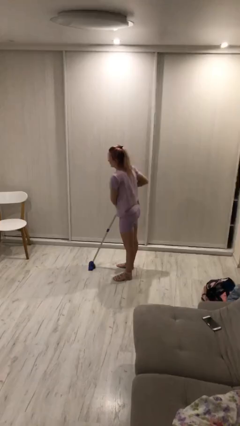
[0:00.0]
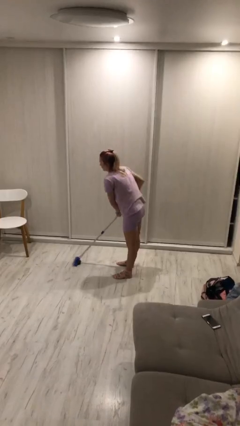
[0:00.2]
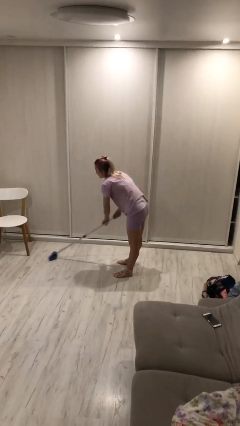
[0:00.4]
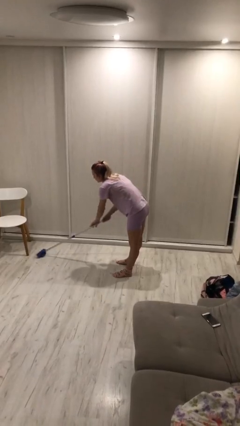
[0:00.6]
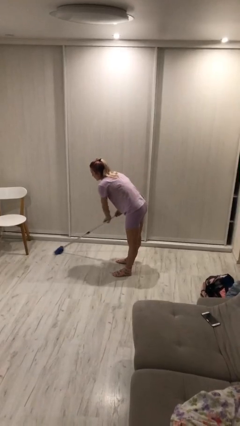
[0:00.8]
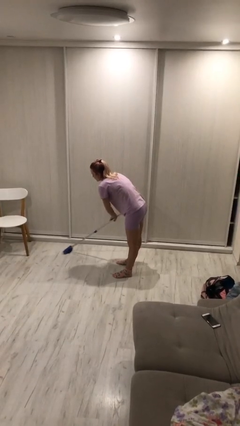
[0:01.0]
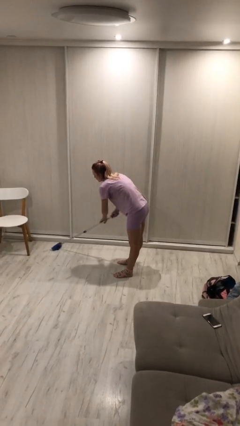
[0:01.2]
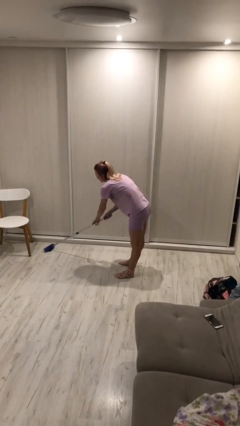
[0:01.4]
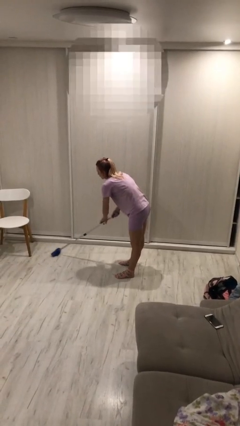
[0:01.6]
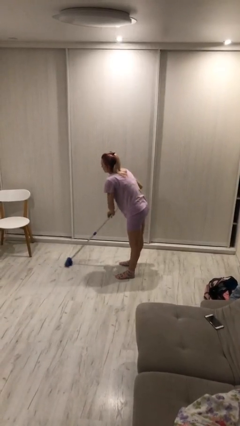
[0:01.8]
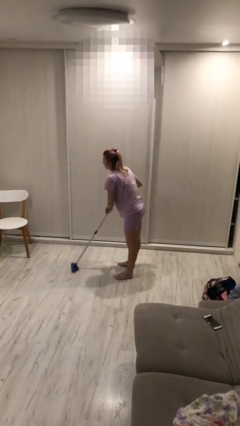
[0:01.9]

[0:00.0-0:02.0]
person mops

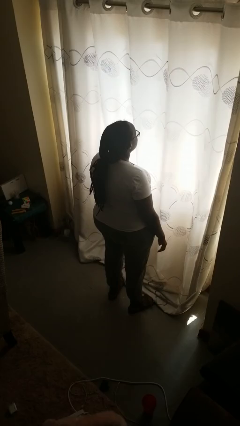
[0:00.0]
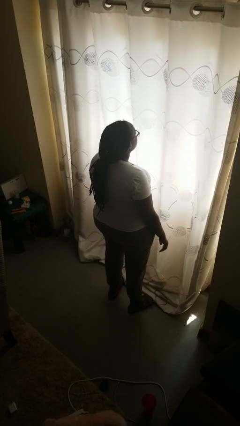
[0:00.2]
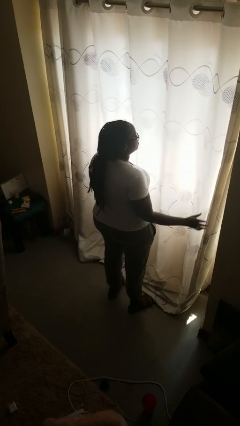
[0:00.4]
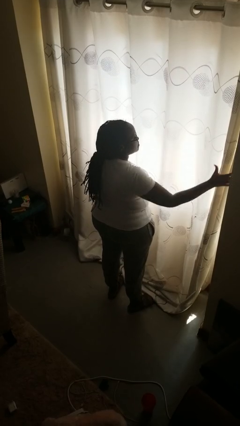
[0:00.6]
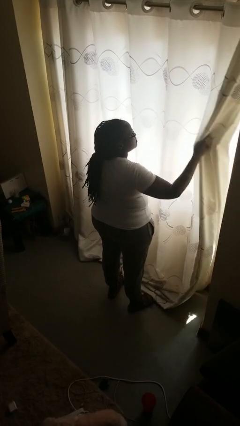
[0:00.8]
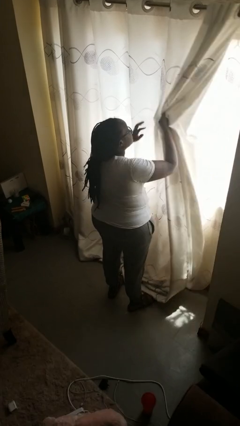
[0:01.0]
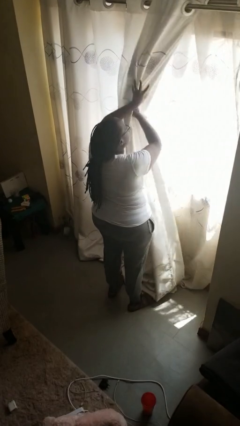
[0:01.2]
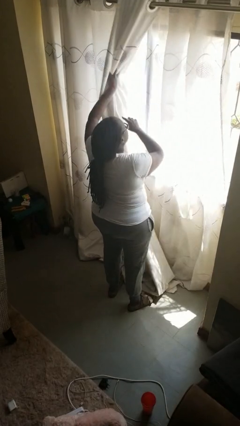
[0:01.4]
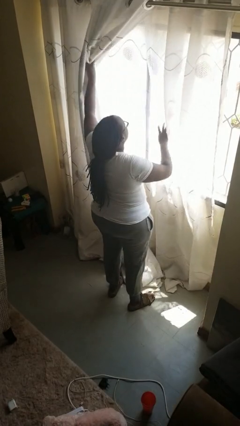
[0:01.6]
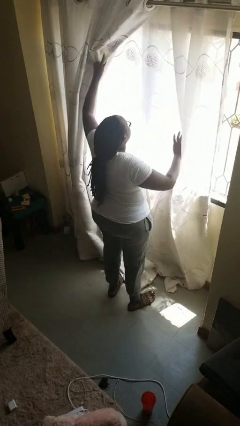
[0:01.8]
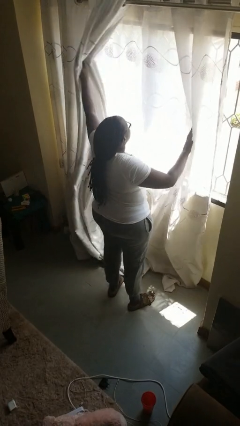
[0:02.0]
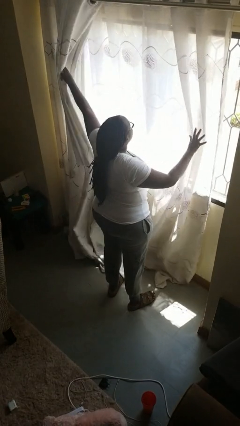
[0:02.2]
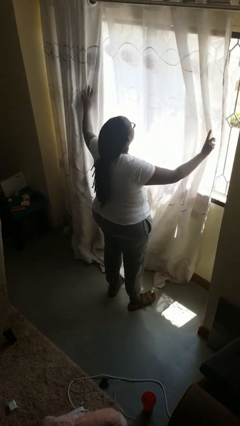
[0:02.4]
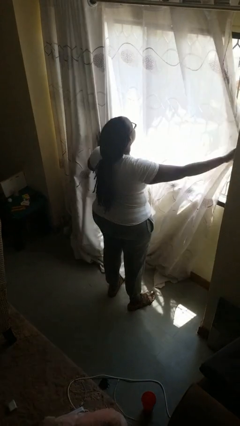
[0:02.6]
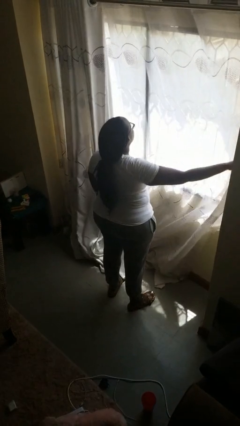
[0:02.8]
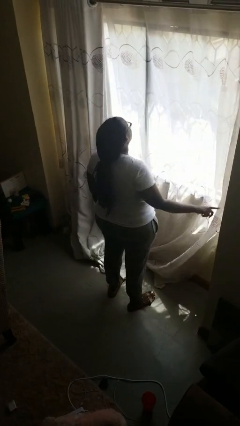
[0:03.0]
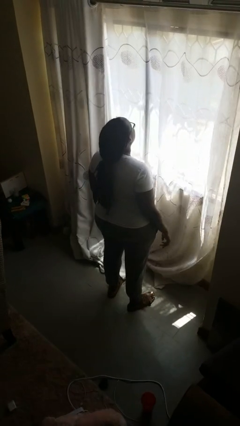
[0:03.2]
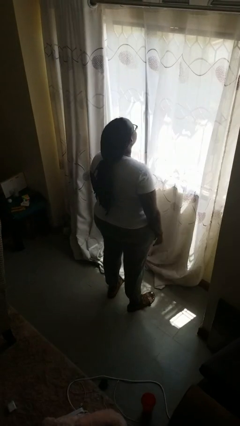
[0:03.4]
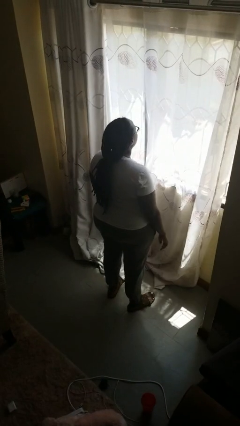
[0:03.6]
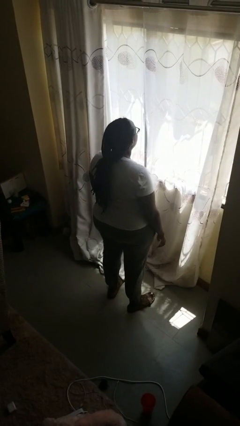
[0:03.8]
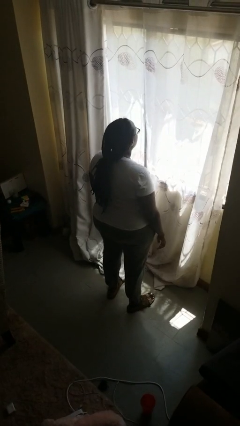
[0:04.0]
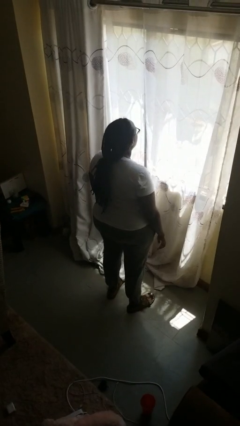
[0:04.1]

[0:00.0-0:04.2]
person opens curtains

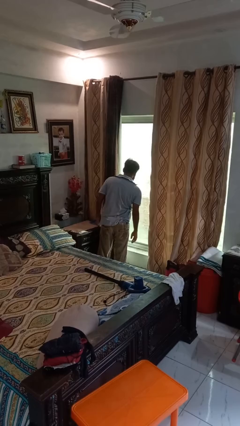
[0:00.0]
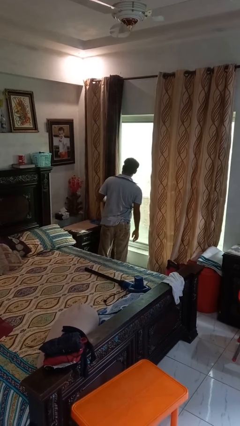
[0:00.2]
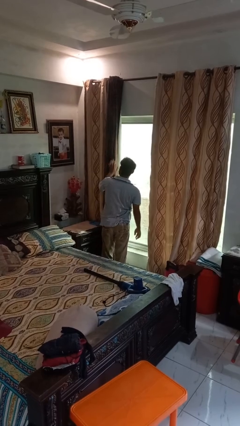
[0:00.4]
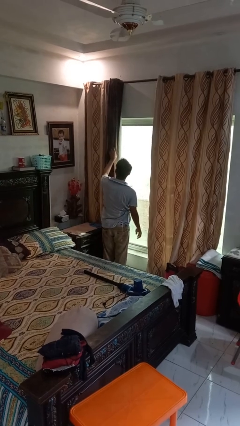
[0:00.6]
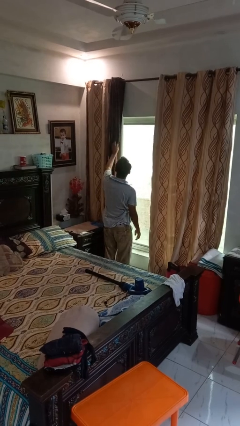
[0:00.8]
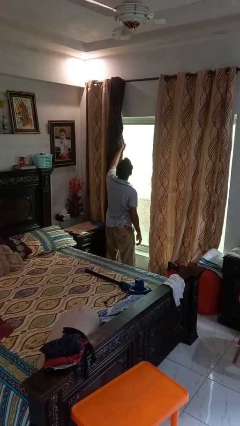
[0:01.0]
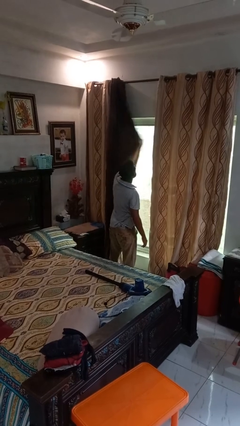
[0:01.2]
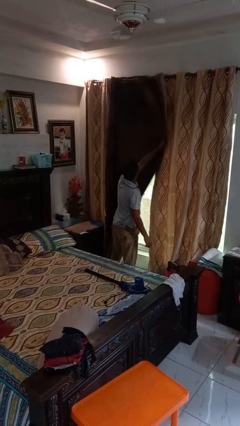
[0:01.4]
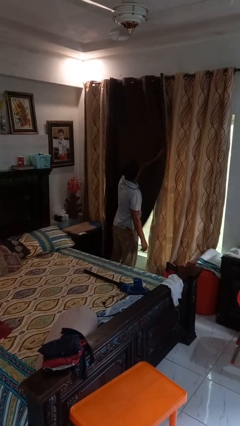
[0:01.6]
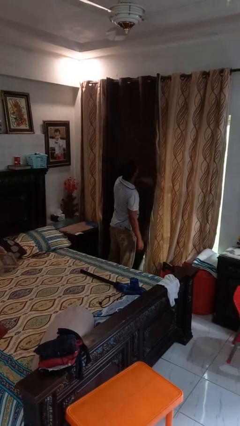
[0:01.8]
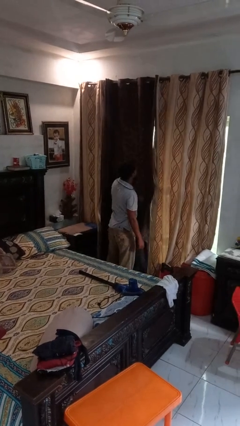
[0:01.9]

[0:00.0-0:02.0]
person closes curtains

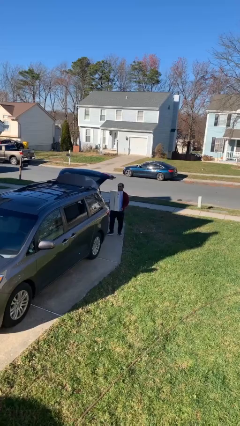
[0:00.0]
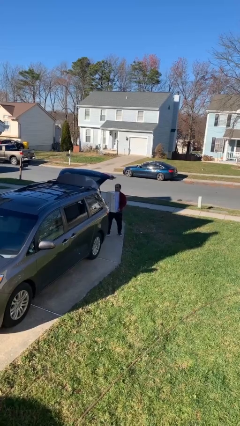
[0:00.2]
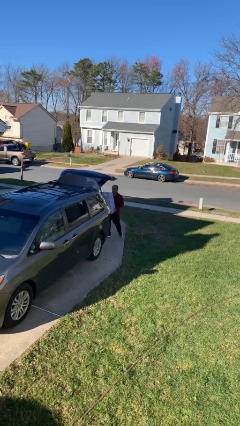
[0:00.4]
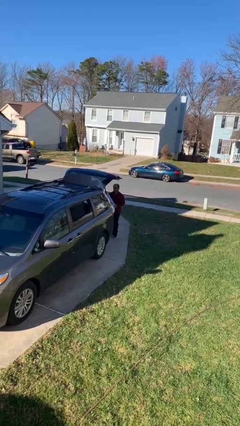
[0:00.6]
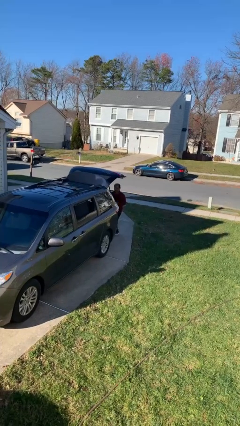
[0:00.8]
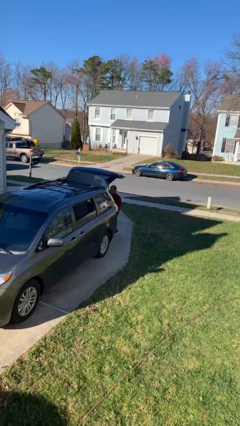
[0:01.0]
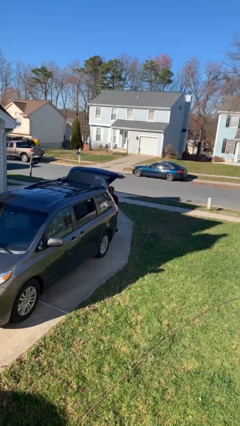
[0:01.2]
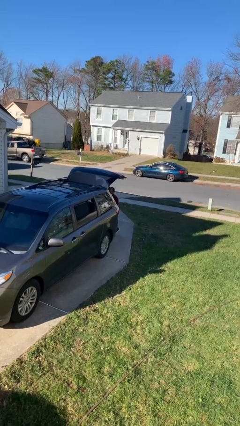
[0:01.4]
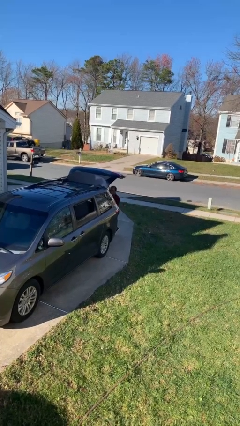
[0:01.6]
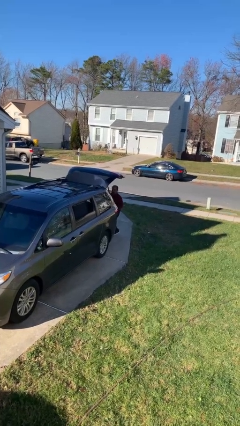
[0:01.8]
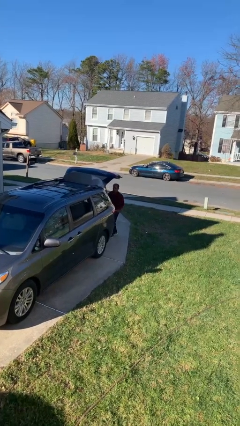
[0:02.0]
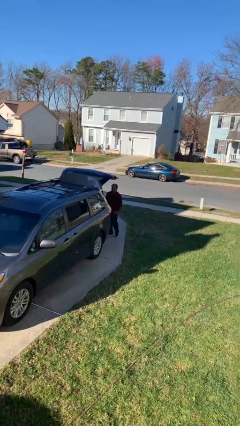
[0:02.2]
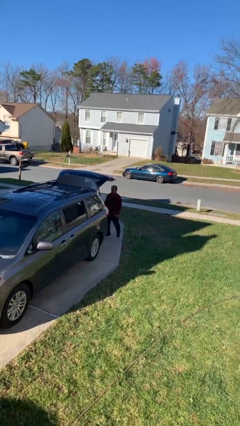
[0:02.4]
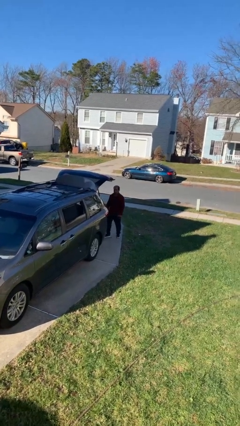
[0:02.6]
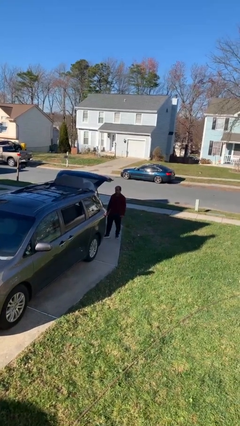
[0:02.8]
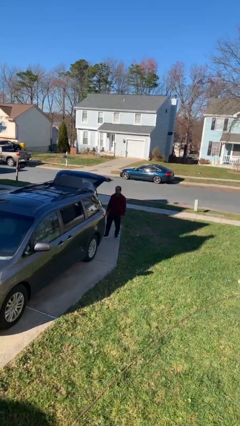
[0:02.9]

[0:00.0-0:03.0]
person loads car

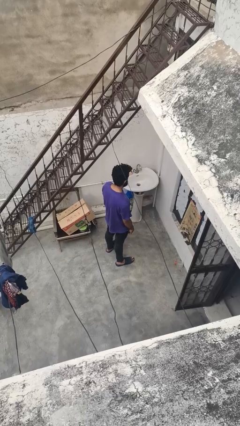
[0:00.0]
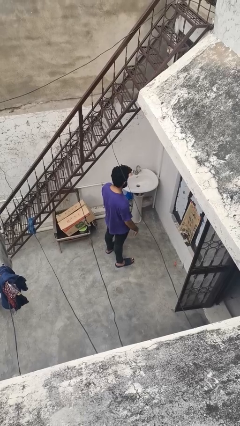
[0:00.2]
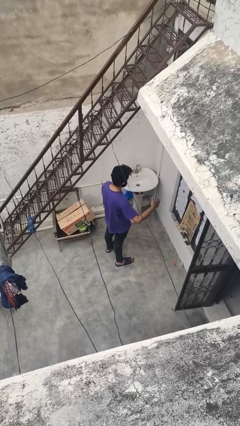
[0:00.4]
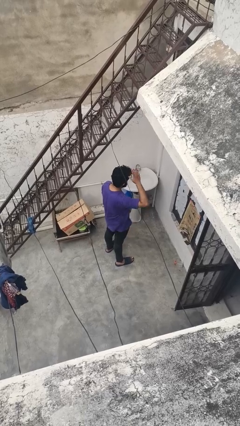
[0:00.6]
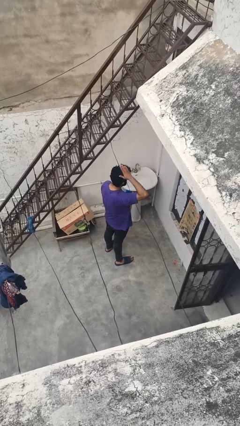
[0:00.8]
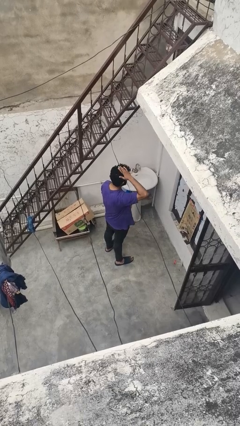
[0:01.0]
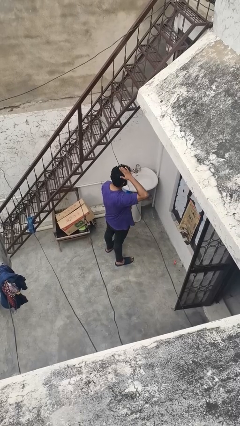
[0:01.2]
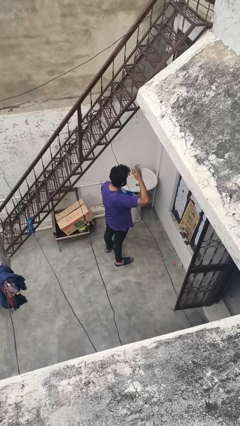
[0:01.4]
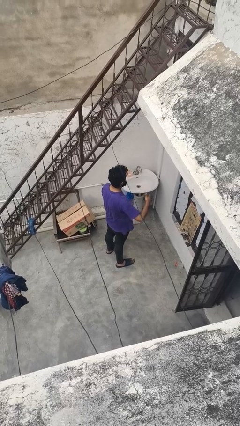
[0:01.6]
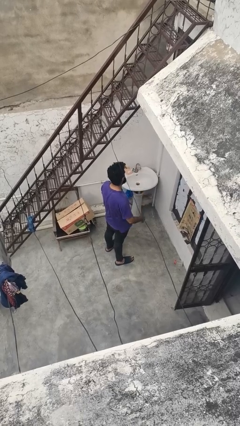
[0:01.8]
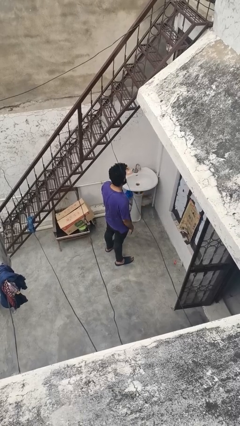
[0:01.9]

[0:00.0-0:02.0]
person pats head

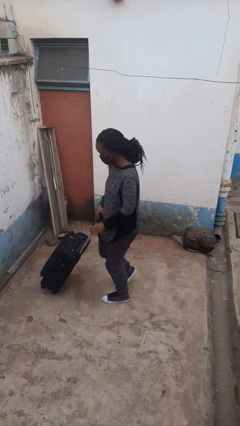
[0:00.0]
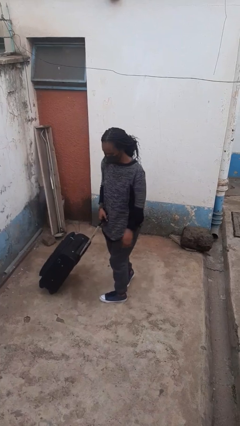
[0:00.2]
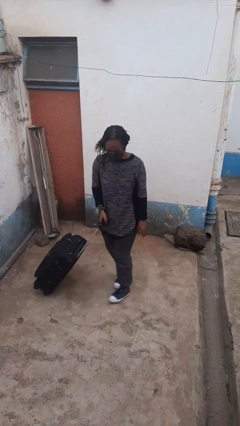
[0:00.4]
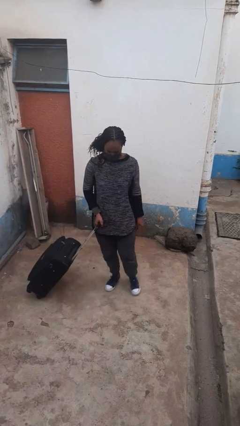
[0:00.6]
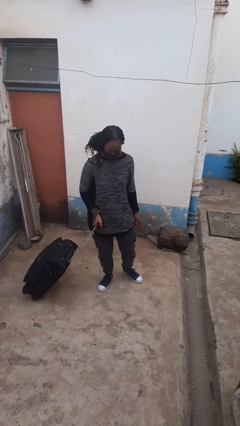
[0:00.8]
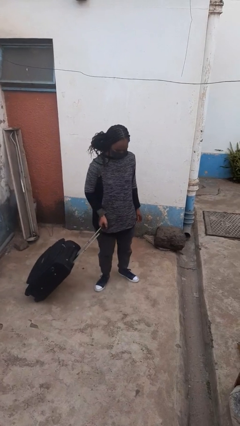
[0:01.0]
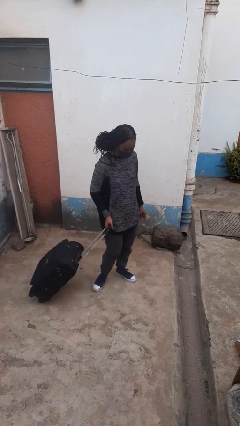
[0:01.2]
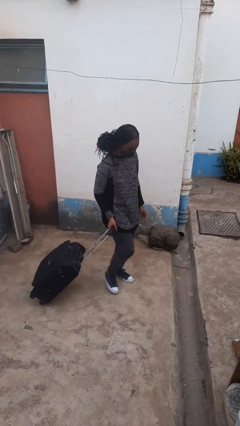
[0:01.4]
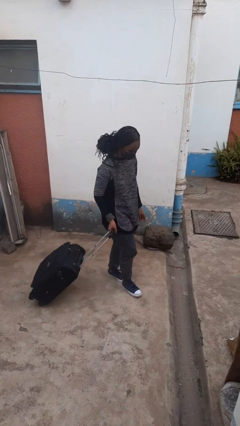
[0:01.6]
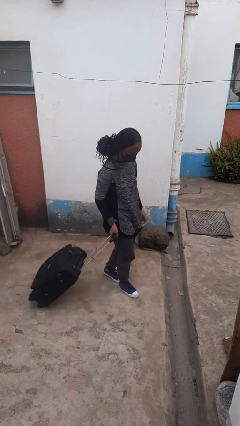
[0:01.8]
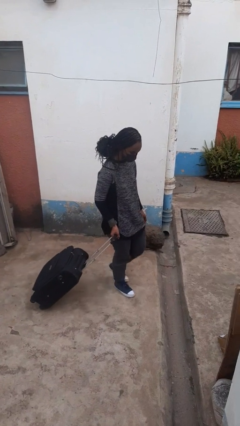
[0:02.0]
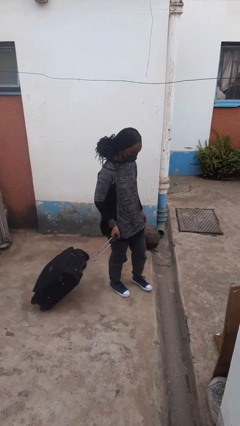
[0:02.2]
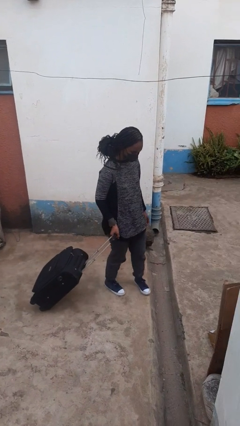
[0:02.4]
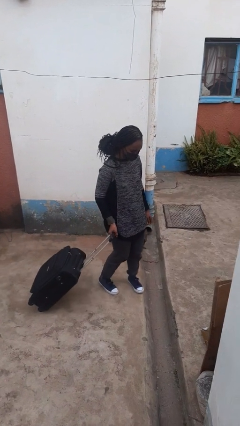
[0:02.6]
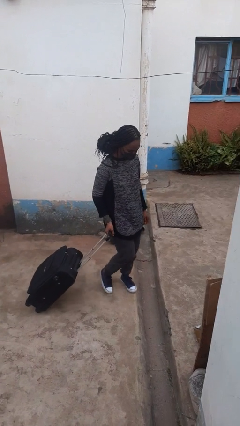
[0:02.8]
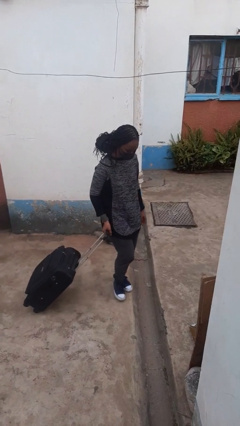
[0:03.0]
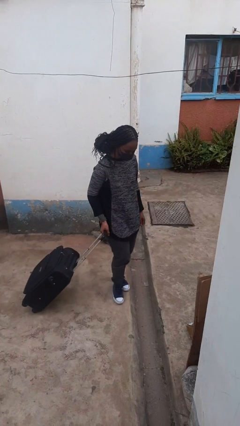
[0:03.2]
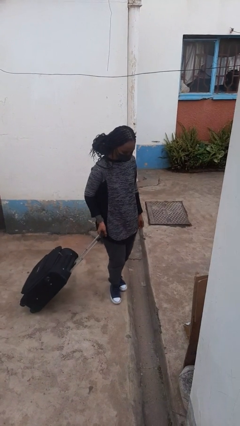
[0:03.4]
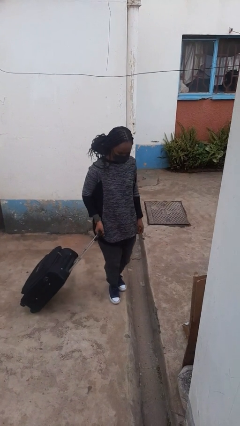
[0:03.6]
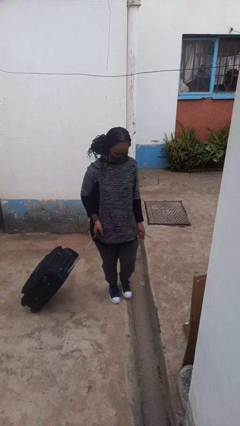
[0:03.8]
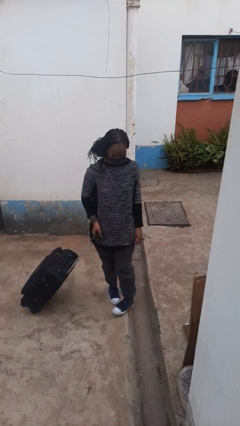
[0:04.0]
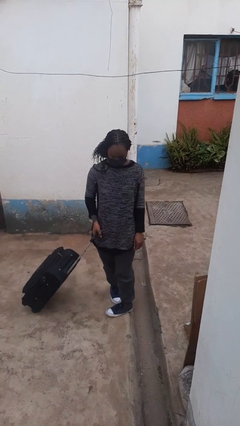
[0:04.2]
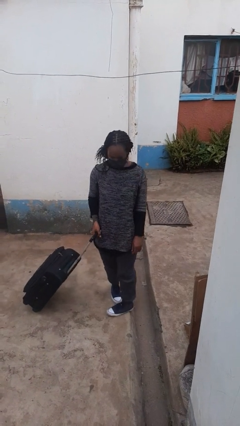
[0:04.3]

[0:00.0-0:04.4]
person pulls wheeled cart
